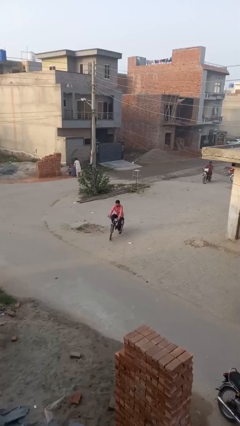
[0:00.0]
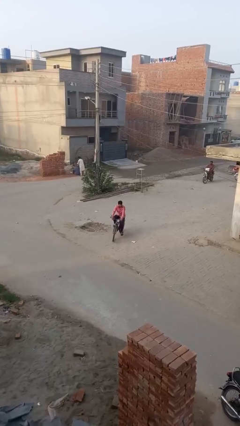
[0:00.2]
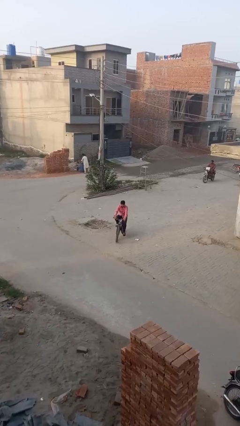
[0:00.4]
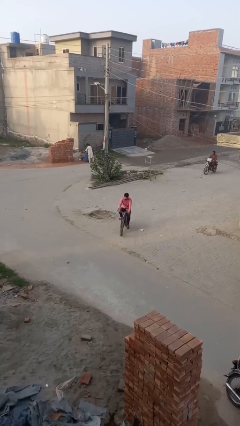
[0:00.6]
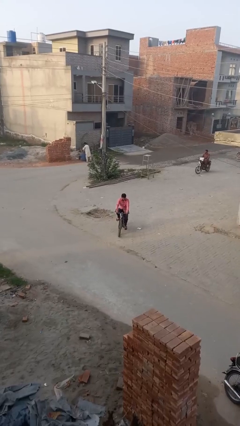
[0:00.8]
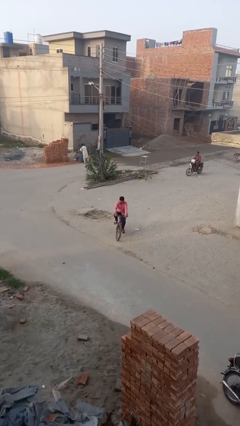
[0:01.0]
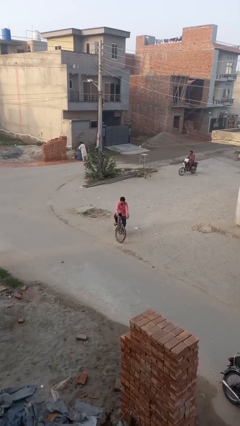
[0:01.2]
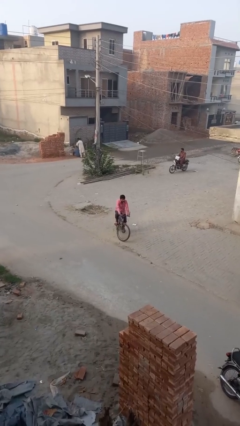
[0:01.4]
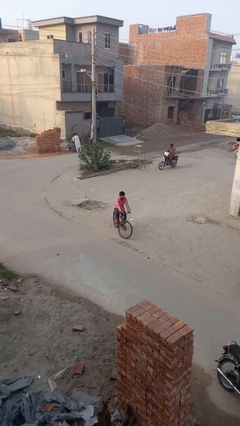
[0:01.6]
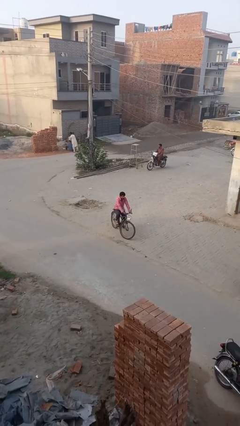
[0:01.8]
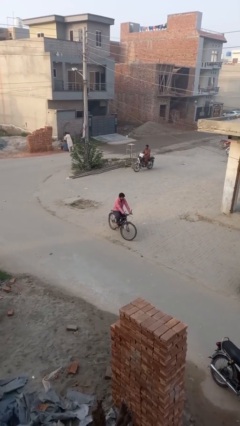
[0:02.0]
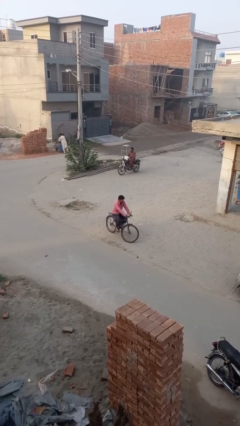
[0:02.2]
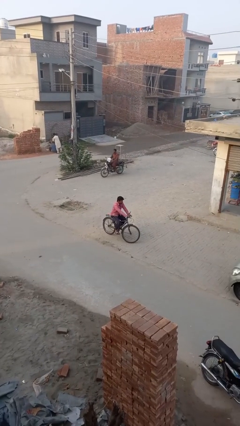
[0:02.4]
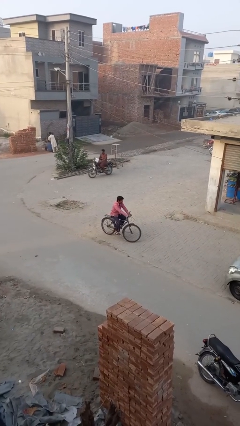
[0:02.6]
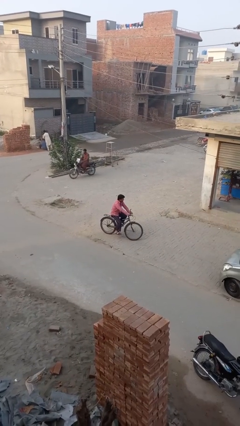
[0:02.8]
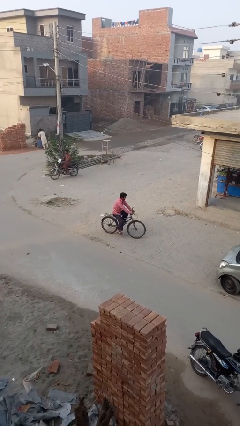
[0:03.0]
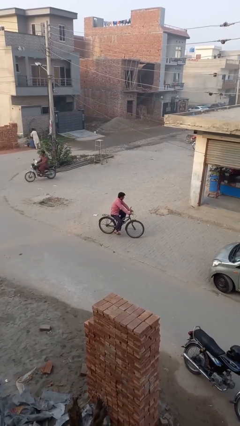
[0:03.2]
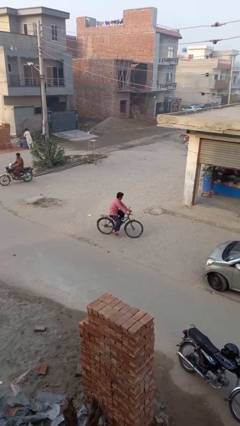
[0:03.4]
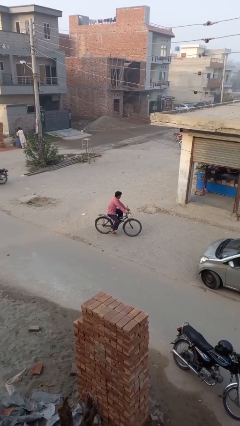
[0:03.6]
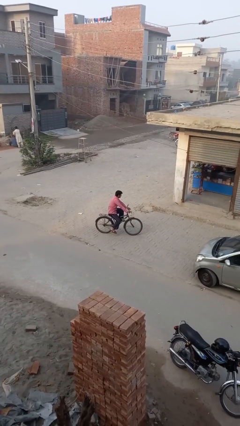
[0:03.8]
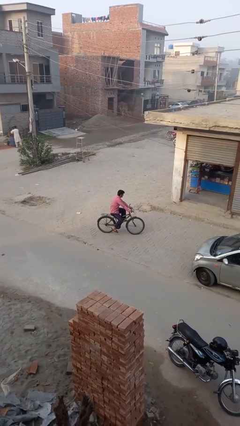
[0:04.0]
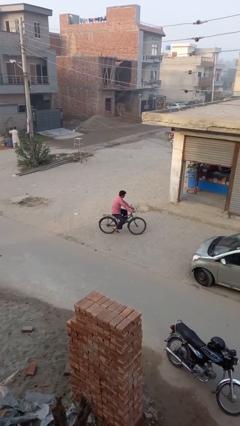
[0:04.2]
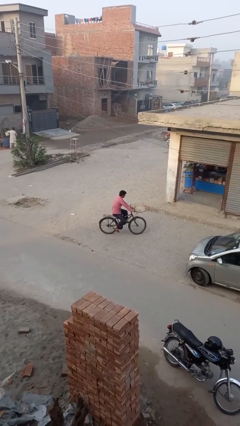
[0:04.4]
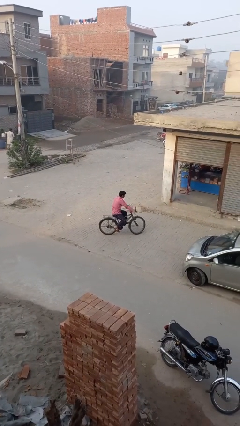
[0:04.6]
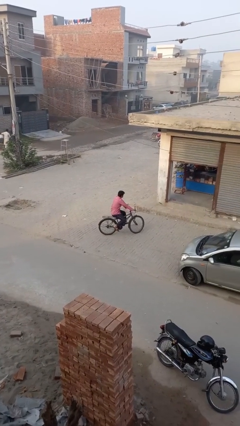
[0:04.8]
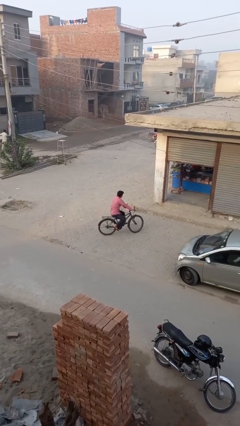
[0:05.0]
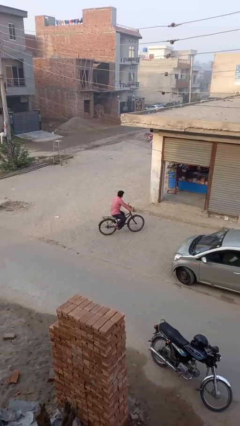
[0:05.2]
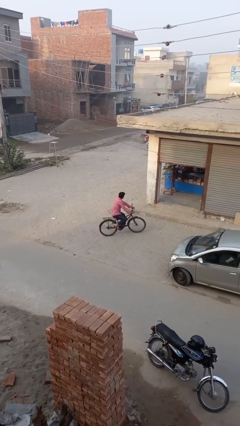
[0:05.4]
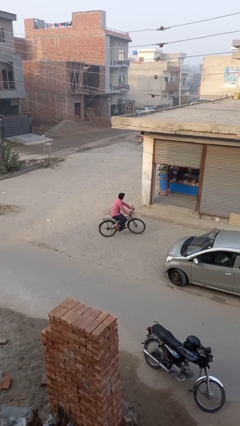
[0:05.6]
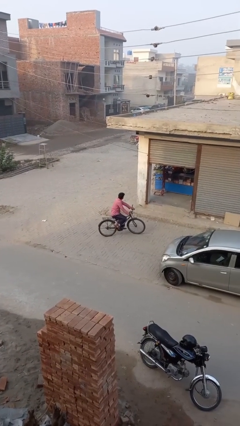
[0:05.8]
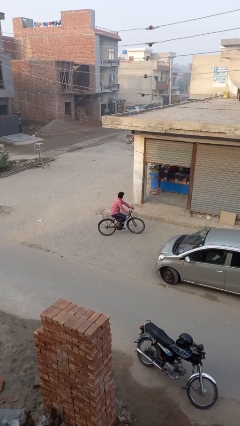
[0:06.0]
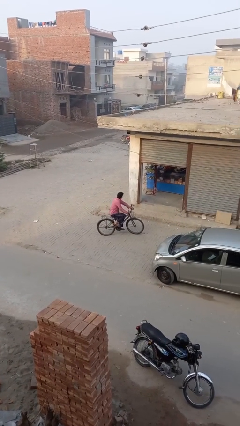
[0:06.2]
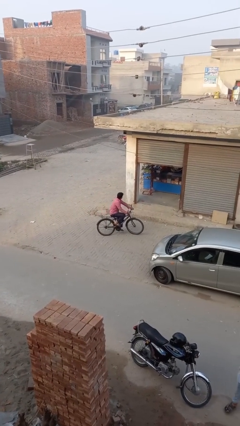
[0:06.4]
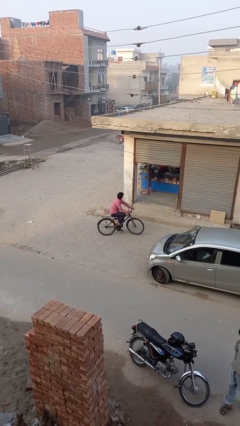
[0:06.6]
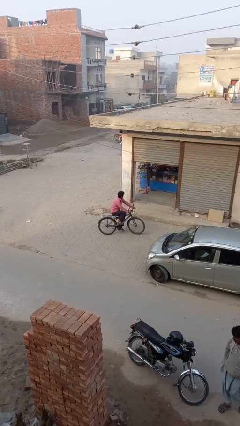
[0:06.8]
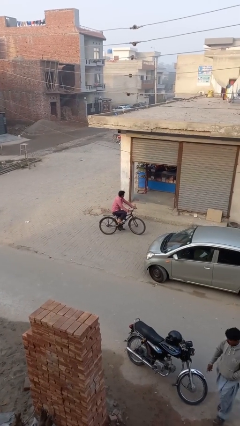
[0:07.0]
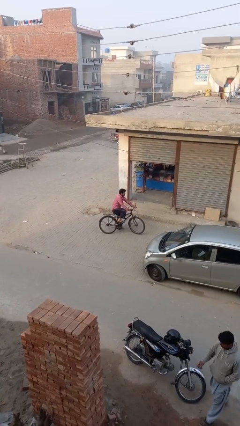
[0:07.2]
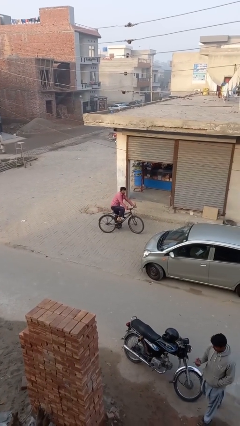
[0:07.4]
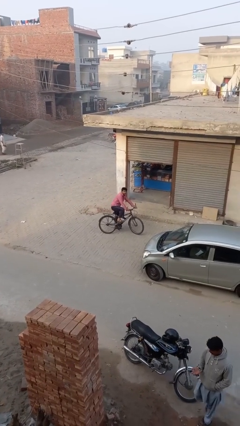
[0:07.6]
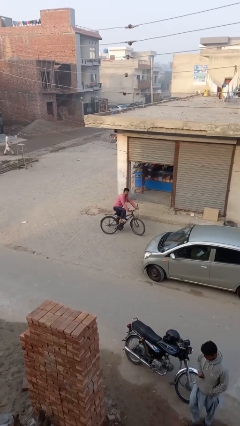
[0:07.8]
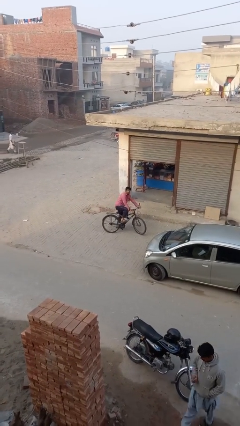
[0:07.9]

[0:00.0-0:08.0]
person rides bicycle

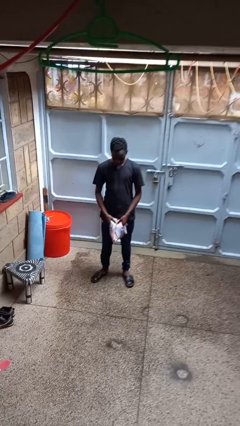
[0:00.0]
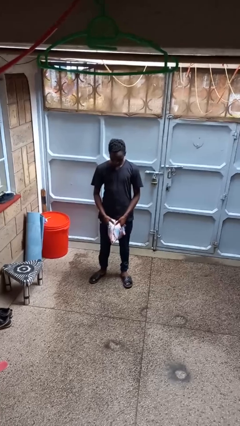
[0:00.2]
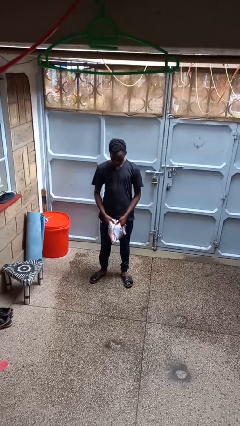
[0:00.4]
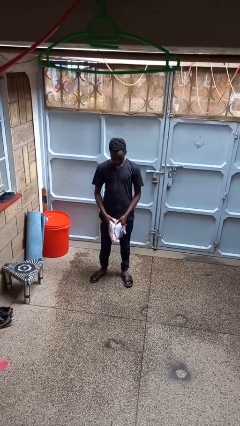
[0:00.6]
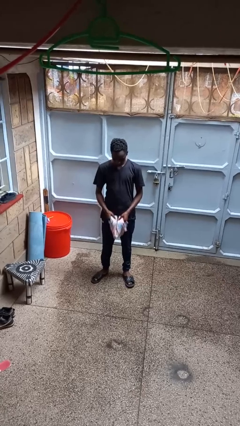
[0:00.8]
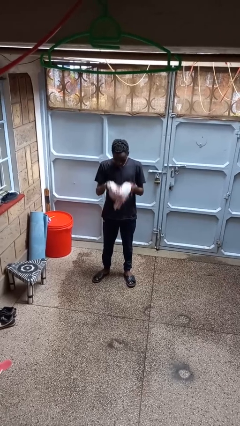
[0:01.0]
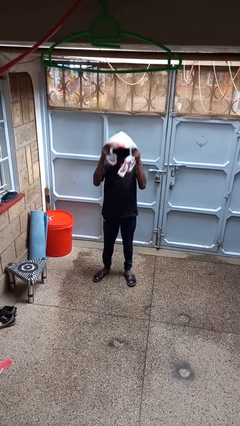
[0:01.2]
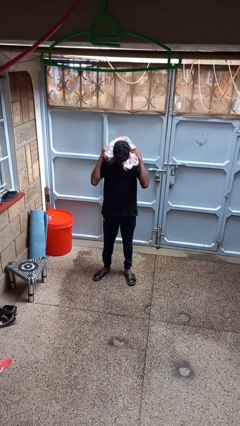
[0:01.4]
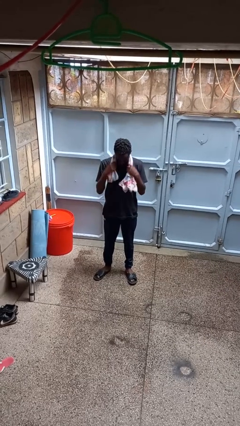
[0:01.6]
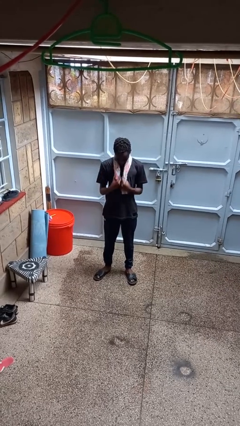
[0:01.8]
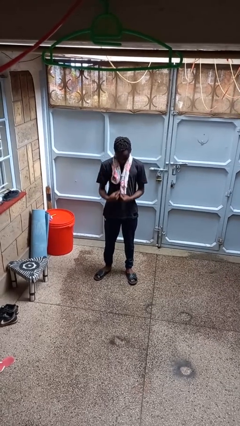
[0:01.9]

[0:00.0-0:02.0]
person puts on scarf

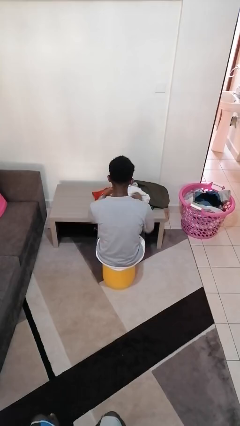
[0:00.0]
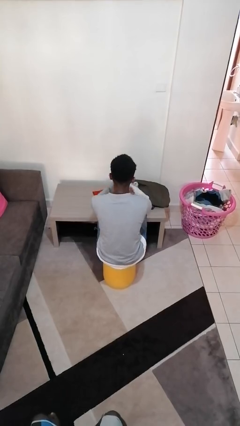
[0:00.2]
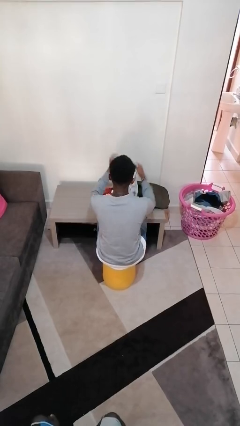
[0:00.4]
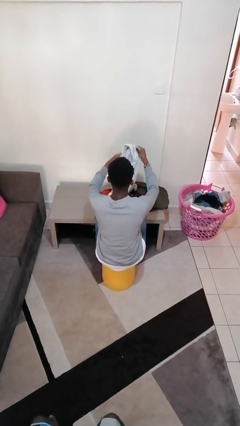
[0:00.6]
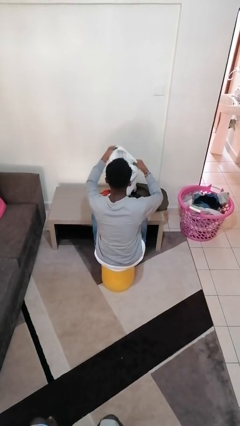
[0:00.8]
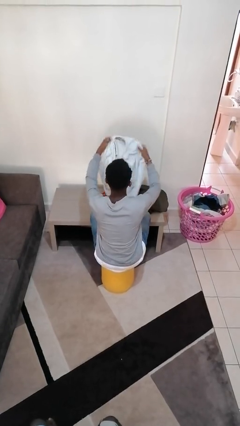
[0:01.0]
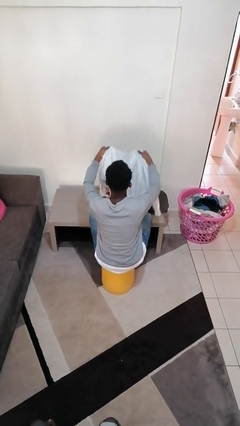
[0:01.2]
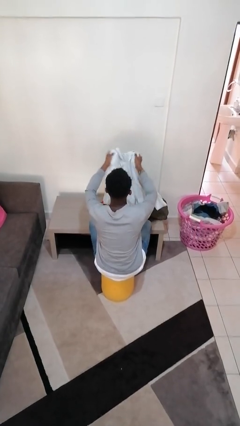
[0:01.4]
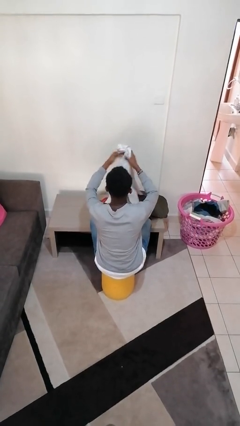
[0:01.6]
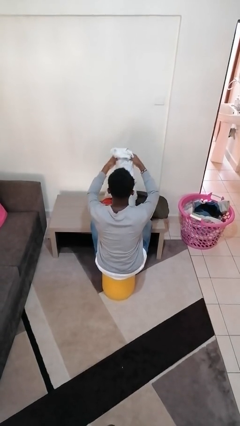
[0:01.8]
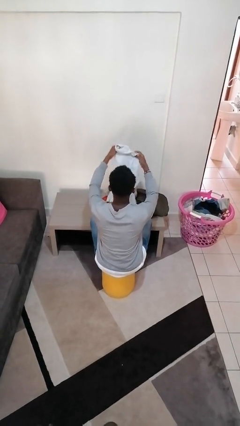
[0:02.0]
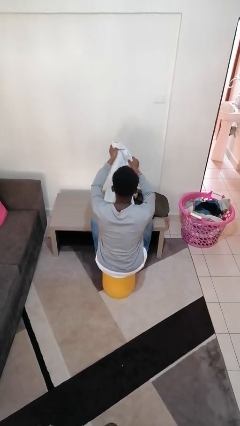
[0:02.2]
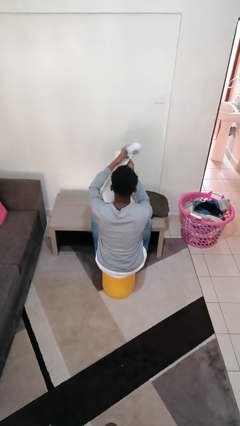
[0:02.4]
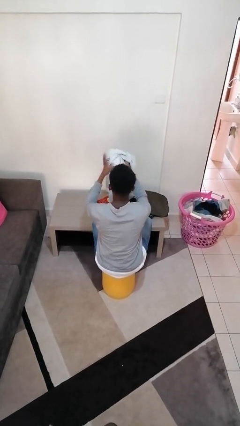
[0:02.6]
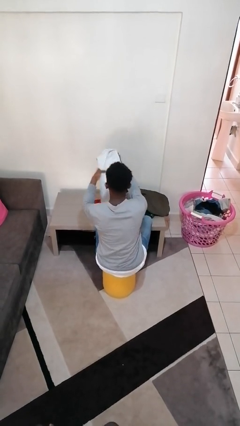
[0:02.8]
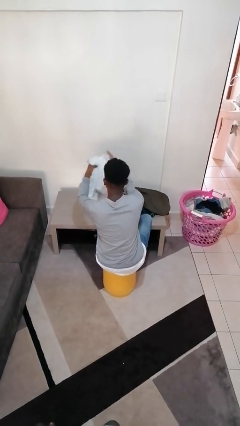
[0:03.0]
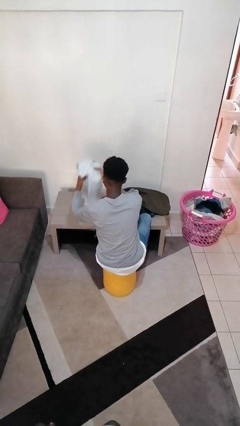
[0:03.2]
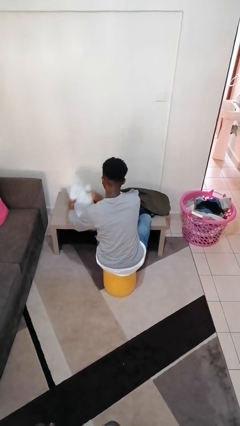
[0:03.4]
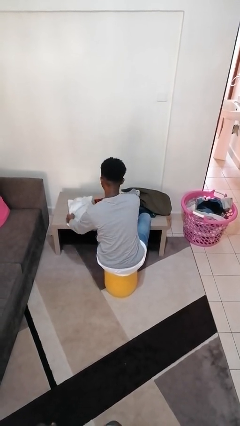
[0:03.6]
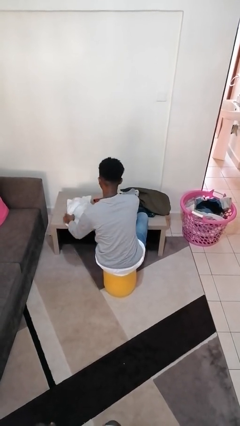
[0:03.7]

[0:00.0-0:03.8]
person folds shirt

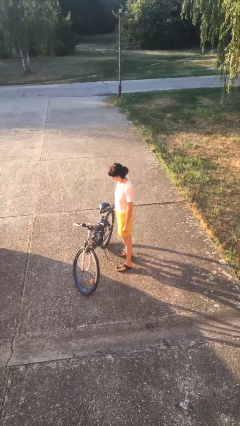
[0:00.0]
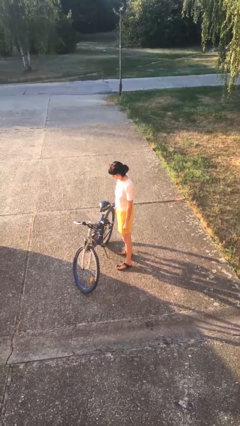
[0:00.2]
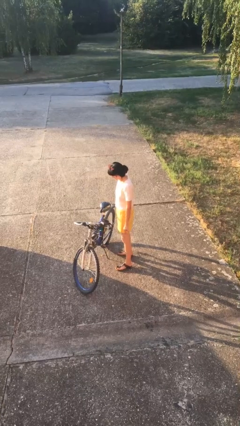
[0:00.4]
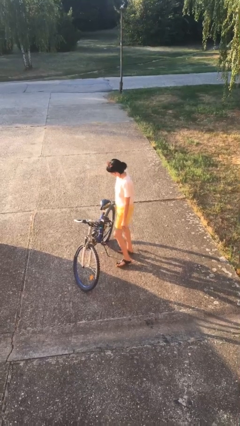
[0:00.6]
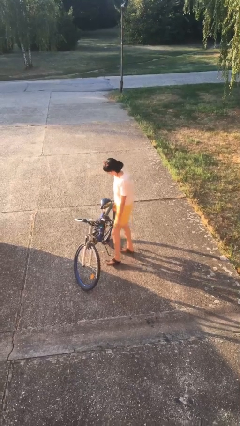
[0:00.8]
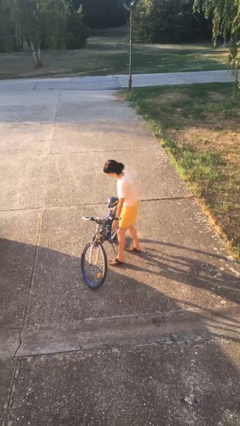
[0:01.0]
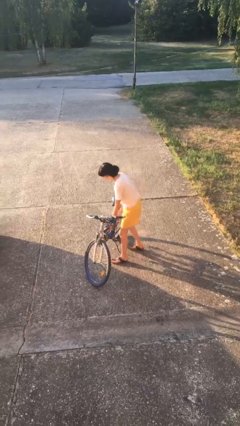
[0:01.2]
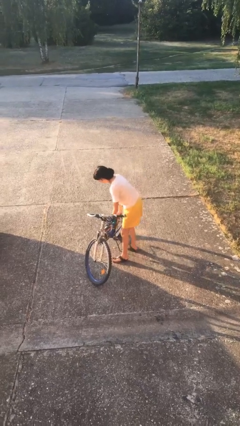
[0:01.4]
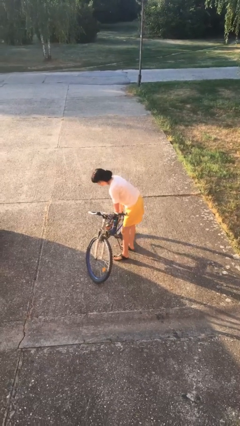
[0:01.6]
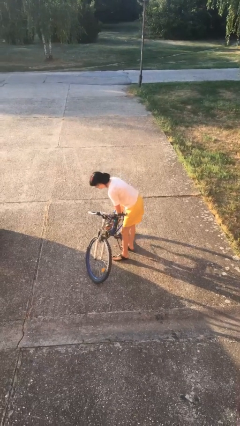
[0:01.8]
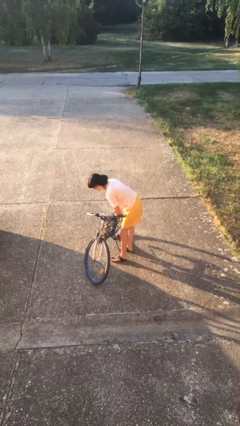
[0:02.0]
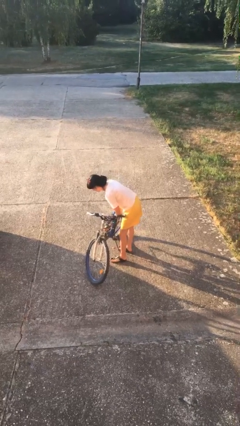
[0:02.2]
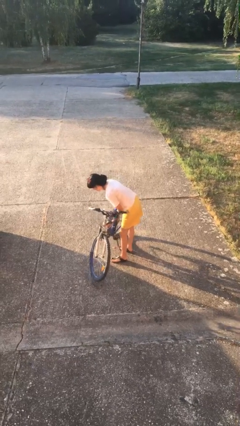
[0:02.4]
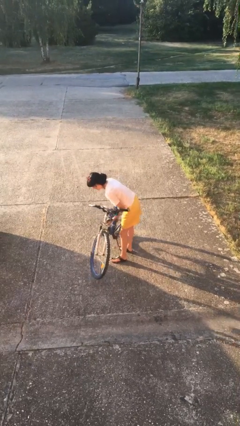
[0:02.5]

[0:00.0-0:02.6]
person picks up object from floor

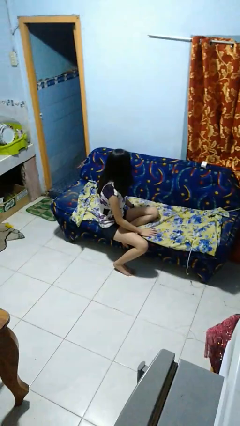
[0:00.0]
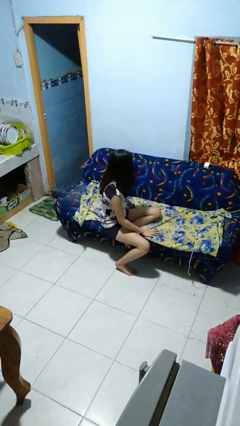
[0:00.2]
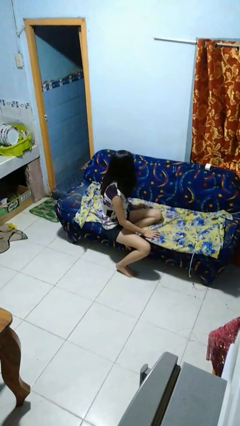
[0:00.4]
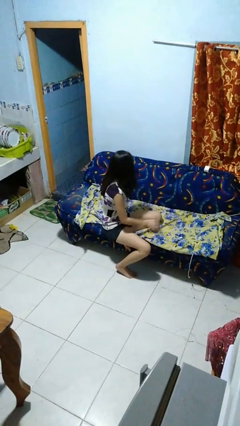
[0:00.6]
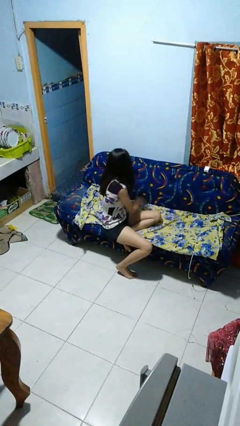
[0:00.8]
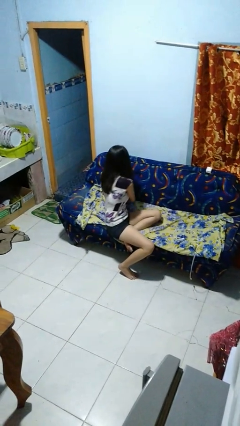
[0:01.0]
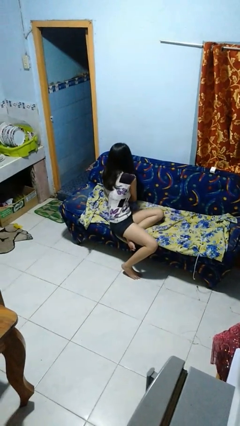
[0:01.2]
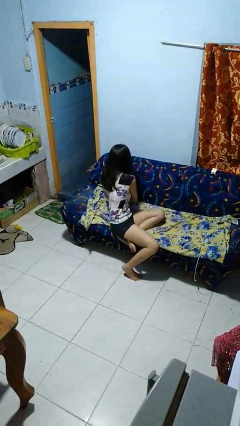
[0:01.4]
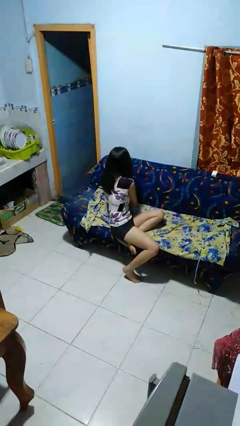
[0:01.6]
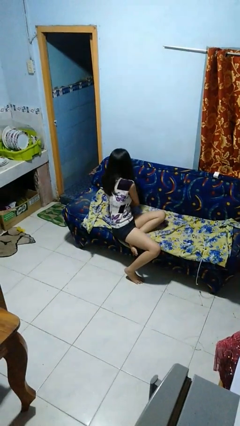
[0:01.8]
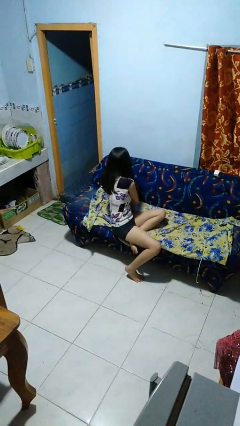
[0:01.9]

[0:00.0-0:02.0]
person searches in couch
